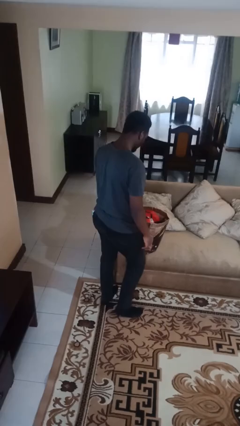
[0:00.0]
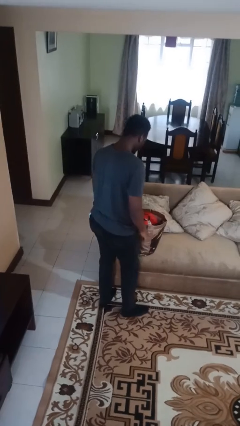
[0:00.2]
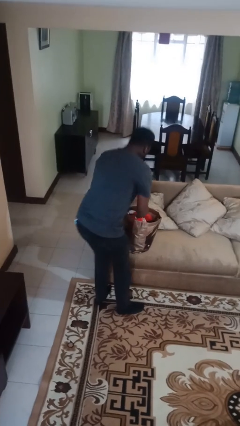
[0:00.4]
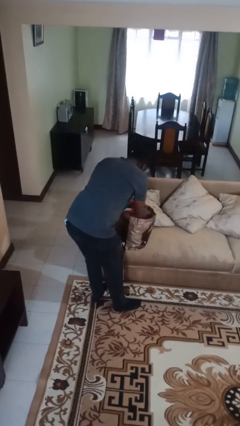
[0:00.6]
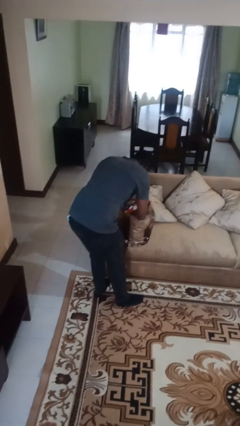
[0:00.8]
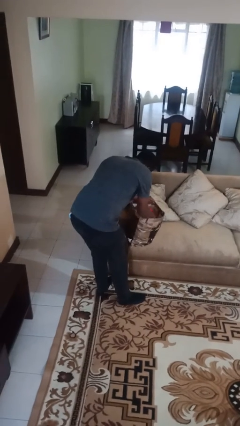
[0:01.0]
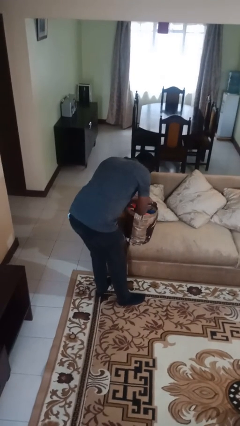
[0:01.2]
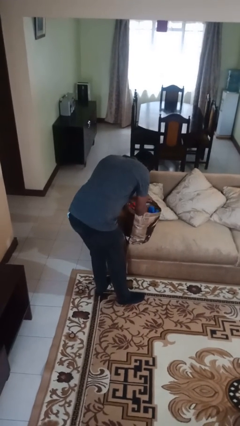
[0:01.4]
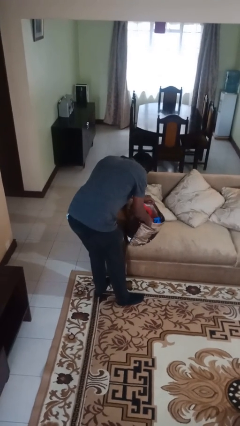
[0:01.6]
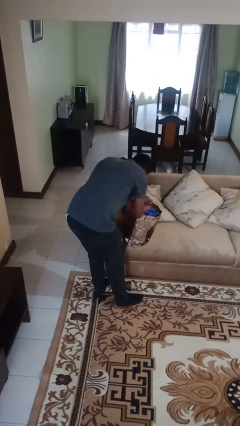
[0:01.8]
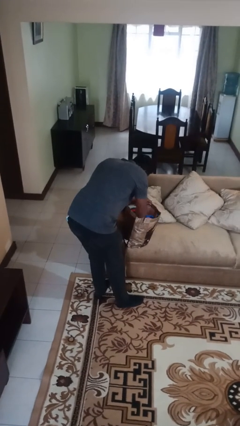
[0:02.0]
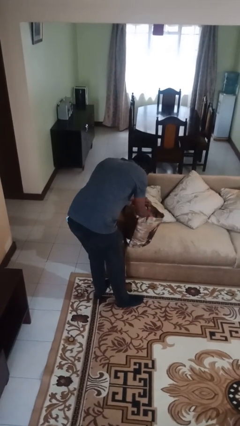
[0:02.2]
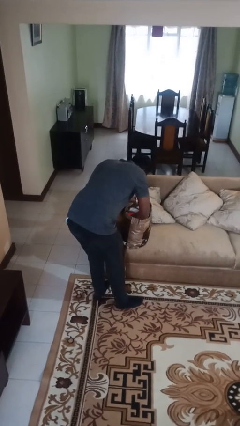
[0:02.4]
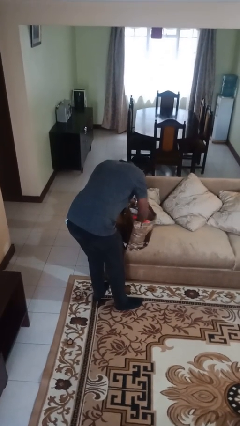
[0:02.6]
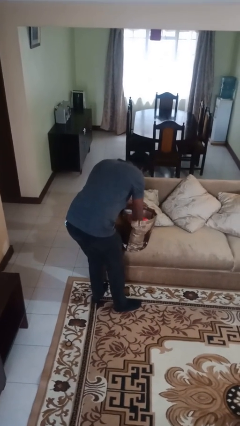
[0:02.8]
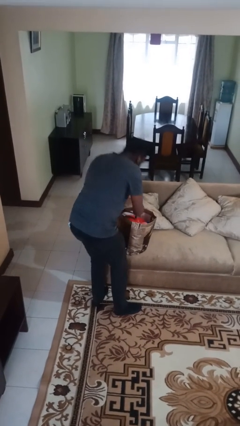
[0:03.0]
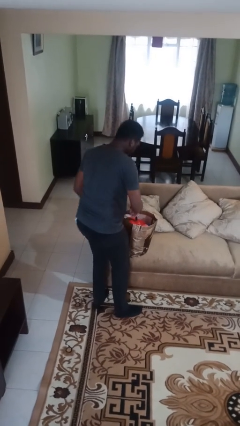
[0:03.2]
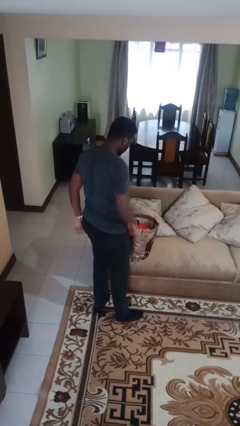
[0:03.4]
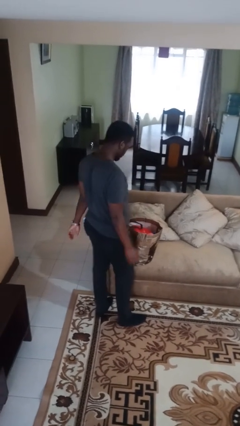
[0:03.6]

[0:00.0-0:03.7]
person searches in bag

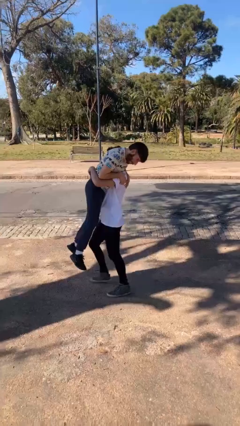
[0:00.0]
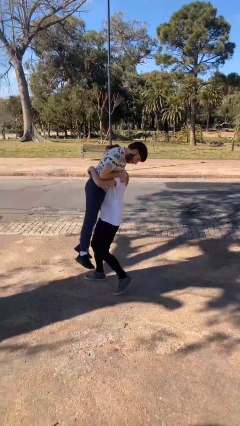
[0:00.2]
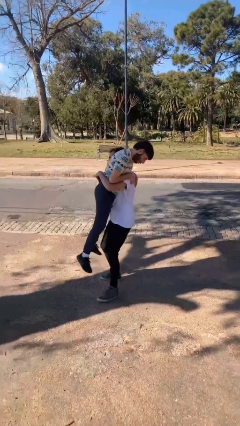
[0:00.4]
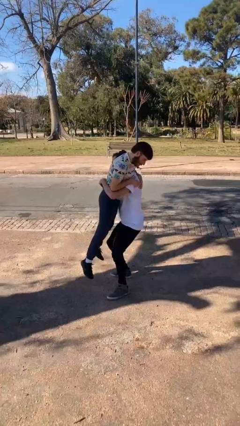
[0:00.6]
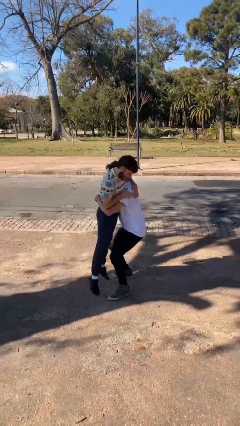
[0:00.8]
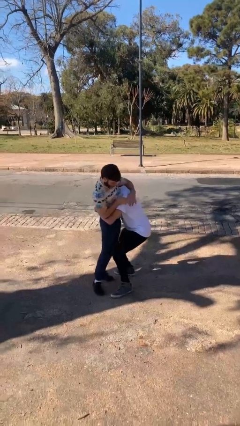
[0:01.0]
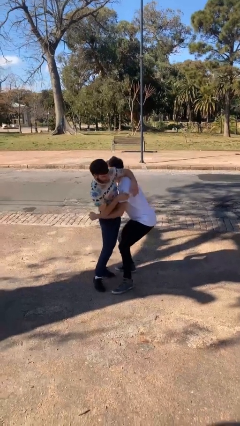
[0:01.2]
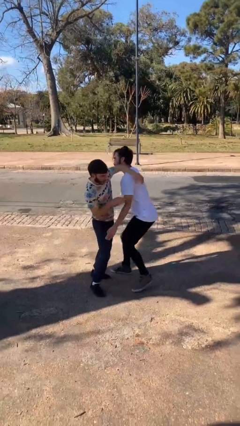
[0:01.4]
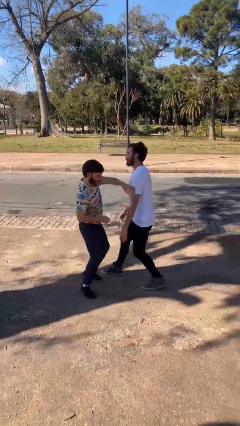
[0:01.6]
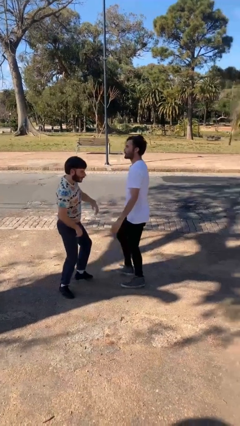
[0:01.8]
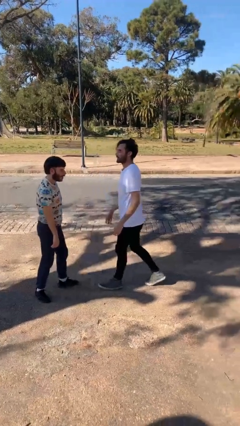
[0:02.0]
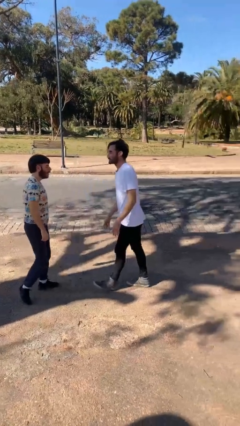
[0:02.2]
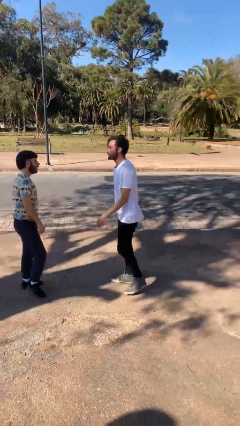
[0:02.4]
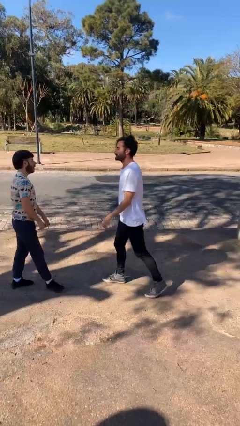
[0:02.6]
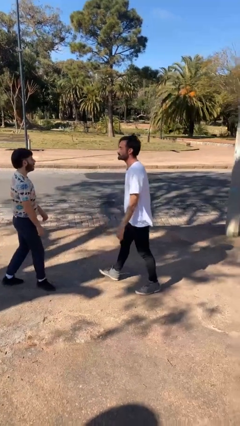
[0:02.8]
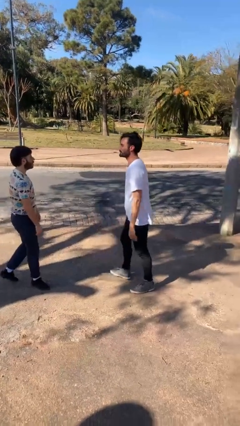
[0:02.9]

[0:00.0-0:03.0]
person puts down person

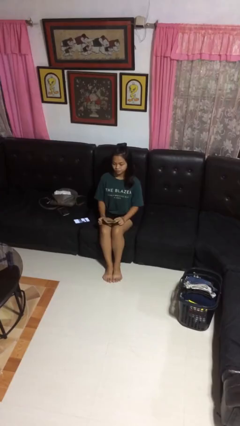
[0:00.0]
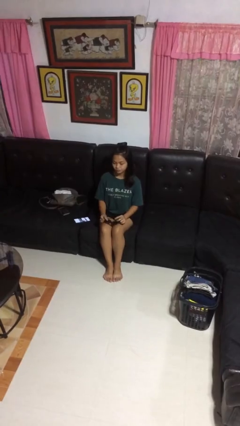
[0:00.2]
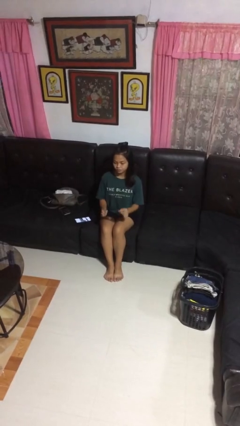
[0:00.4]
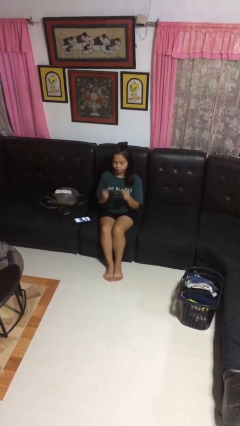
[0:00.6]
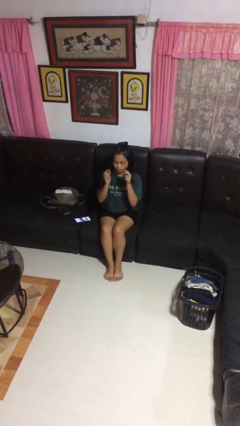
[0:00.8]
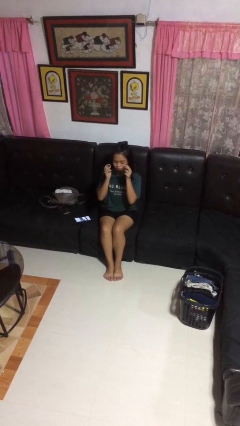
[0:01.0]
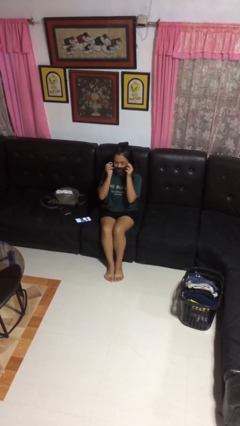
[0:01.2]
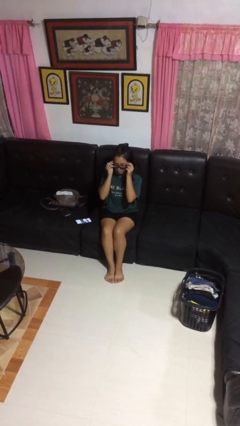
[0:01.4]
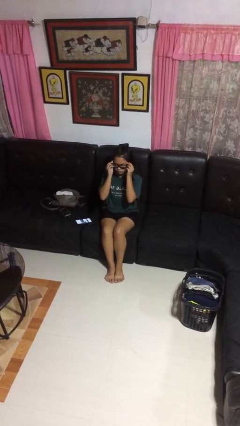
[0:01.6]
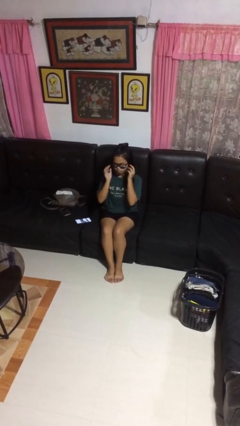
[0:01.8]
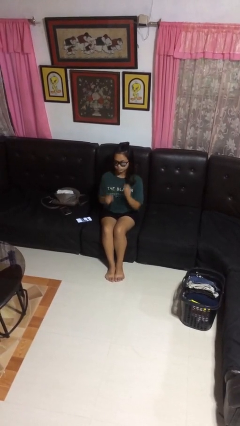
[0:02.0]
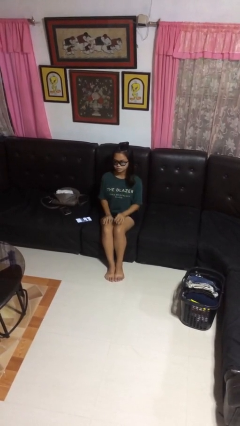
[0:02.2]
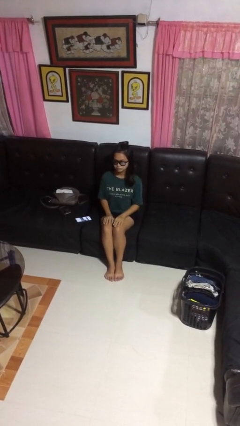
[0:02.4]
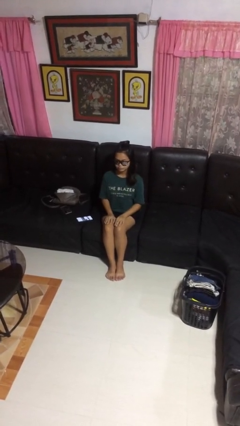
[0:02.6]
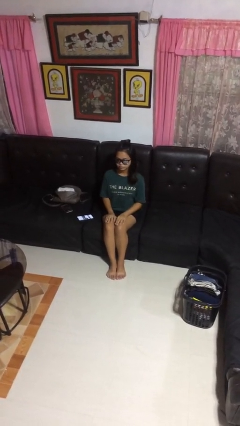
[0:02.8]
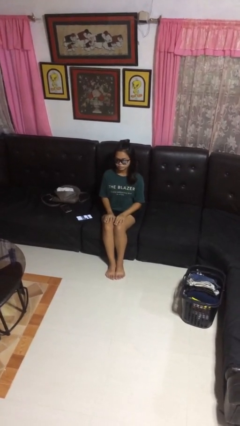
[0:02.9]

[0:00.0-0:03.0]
person puts on sunglasses

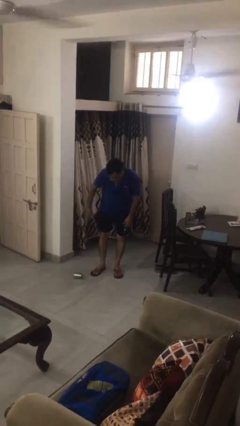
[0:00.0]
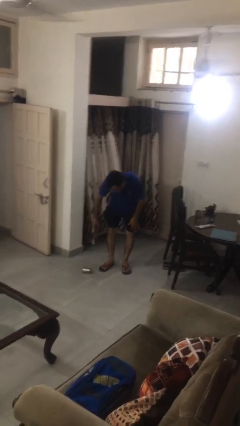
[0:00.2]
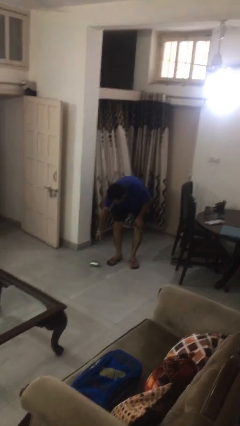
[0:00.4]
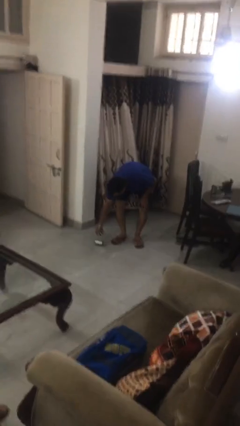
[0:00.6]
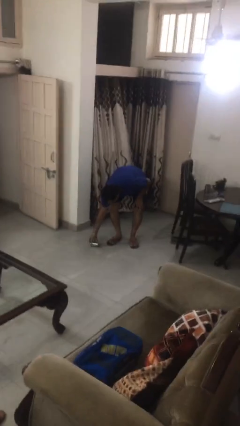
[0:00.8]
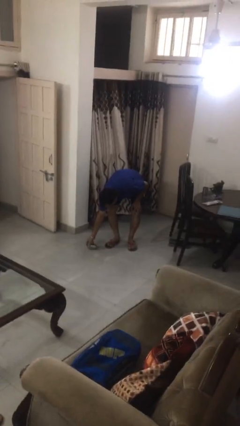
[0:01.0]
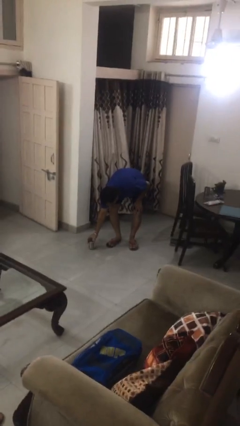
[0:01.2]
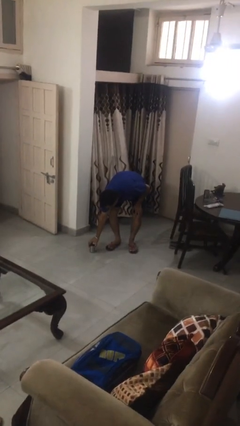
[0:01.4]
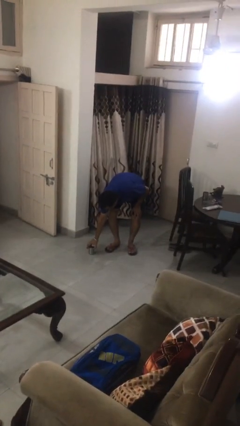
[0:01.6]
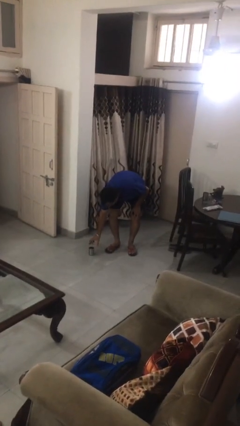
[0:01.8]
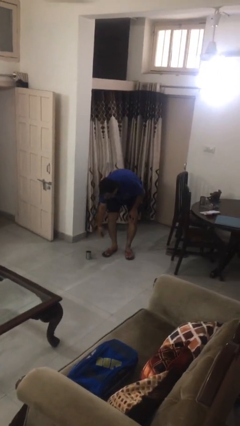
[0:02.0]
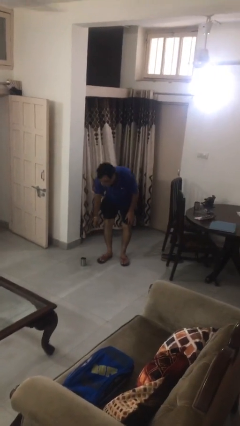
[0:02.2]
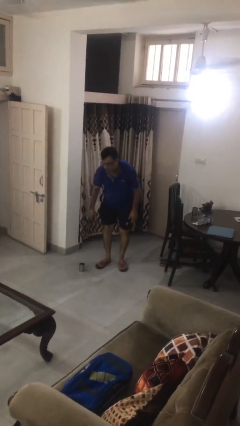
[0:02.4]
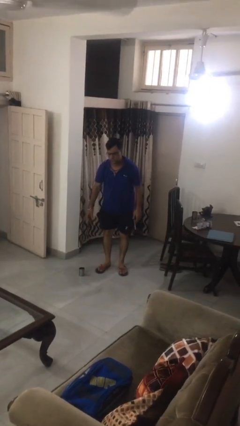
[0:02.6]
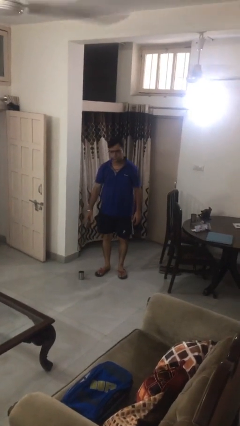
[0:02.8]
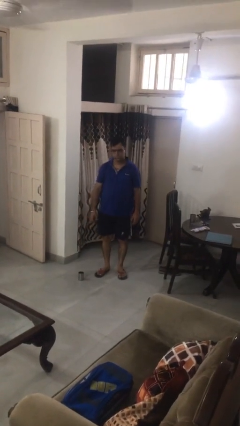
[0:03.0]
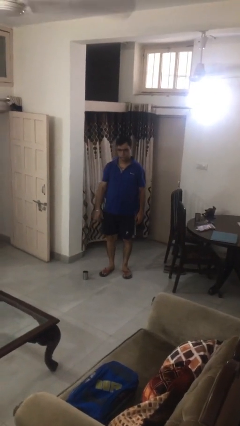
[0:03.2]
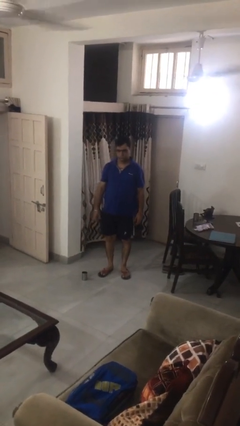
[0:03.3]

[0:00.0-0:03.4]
person sets upright glass

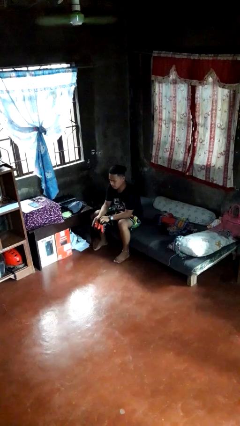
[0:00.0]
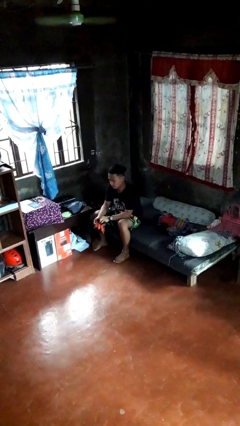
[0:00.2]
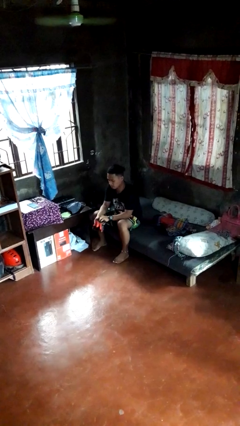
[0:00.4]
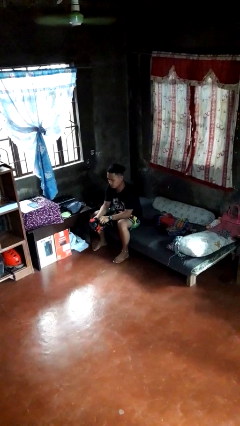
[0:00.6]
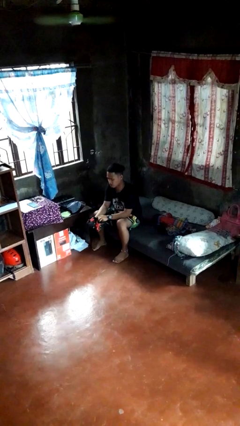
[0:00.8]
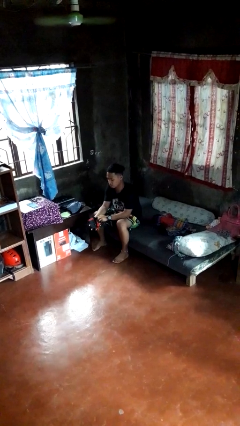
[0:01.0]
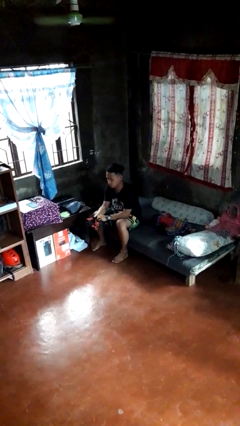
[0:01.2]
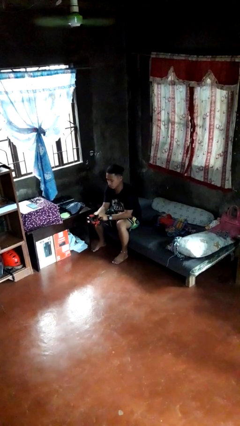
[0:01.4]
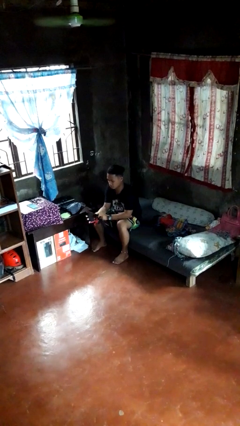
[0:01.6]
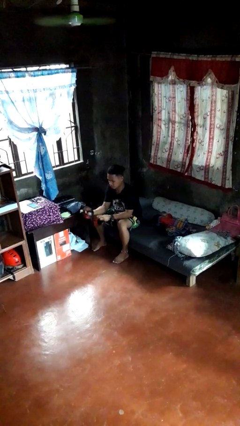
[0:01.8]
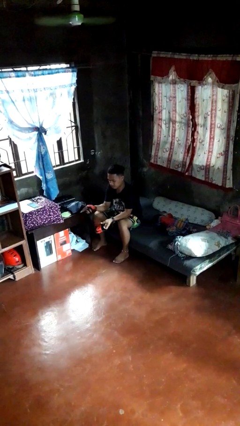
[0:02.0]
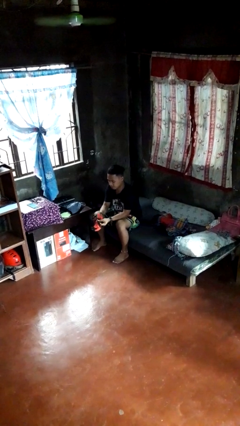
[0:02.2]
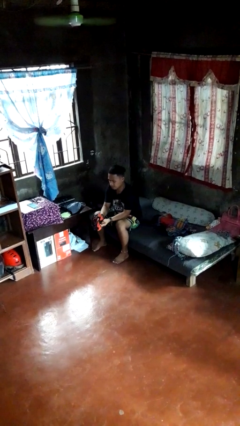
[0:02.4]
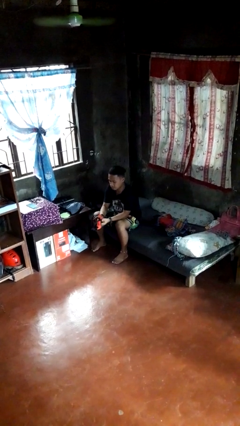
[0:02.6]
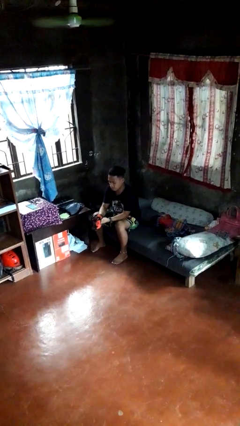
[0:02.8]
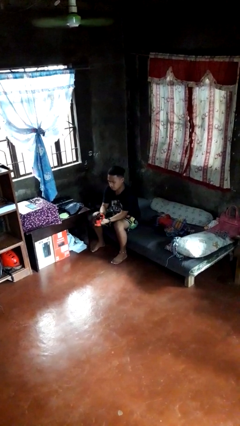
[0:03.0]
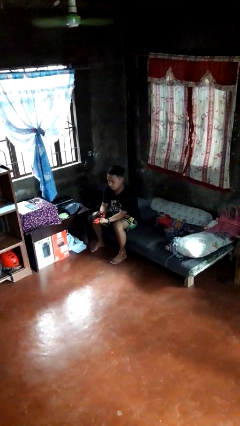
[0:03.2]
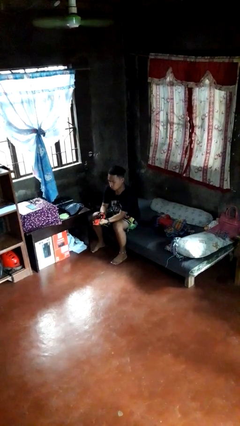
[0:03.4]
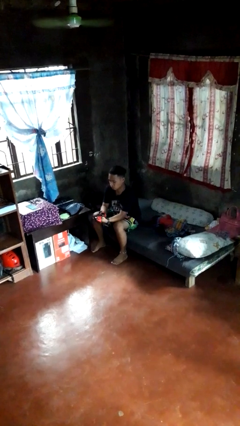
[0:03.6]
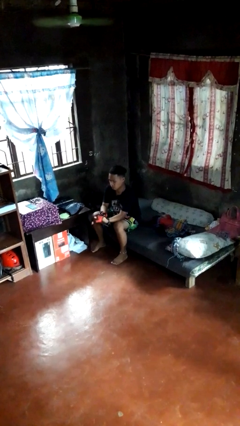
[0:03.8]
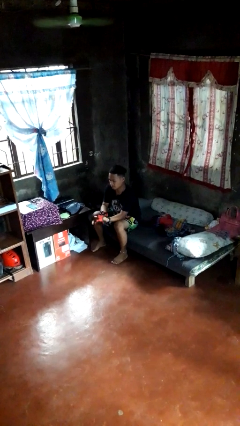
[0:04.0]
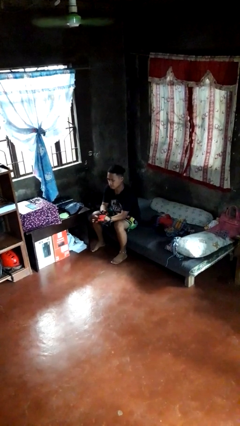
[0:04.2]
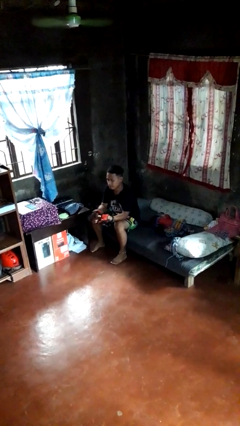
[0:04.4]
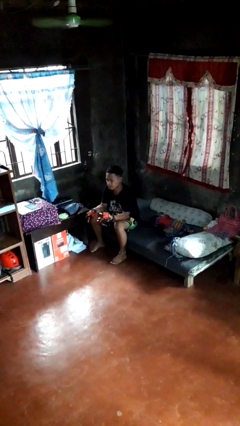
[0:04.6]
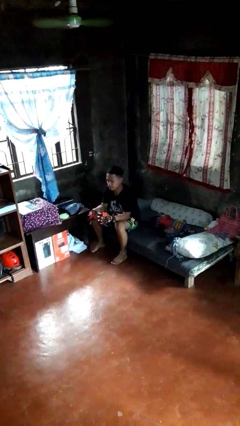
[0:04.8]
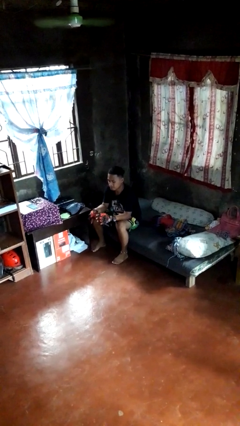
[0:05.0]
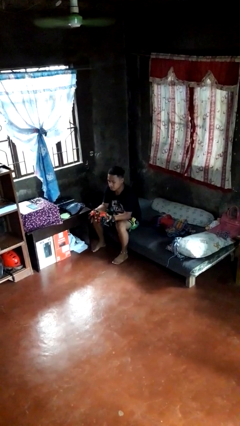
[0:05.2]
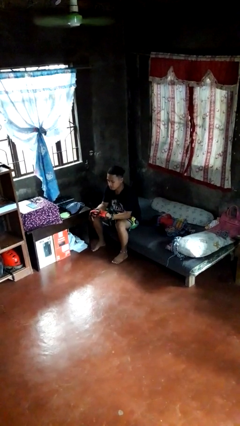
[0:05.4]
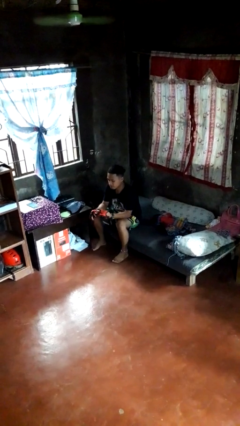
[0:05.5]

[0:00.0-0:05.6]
person puts on gloves
